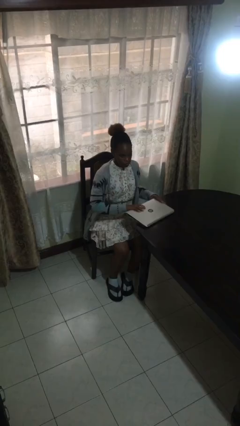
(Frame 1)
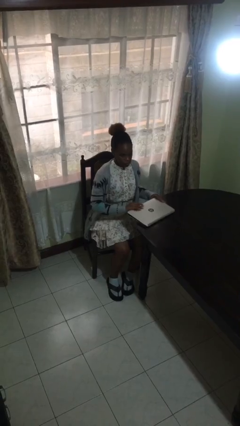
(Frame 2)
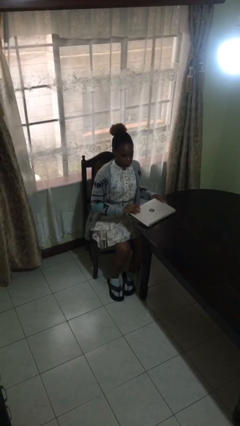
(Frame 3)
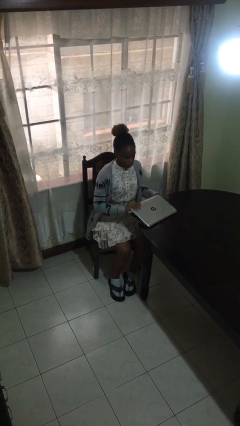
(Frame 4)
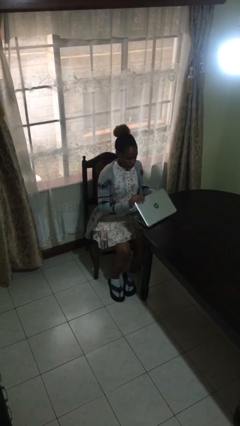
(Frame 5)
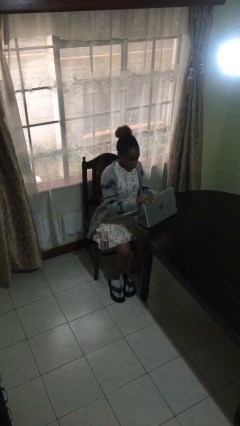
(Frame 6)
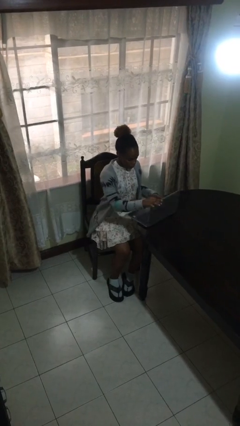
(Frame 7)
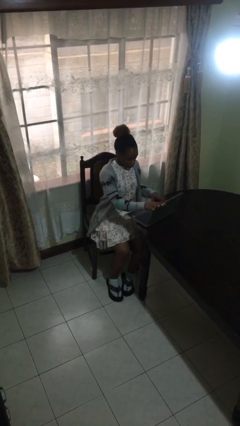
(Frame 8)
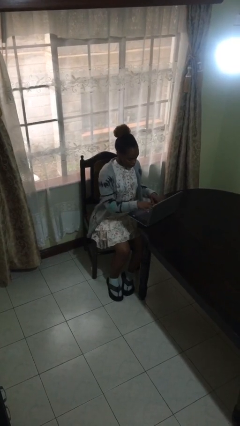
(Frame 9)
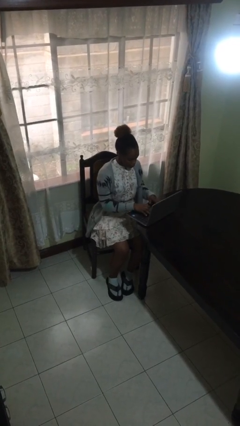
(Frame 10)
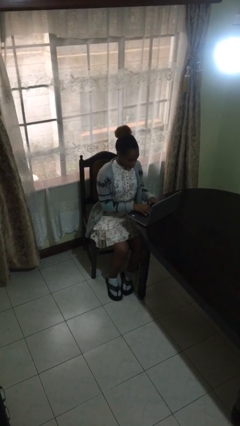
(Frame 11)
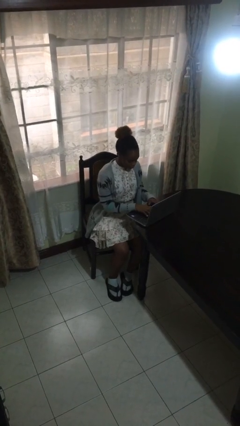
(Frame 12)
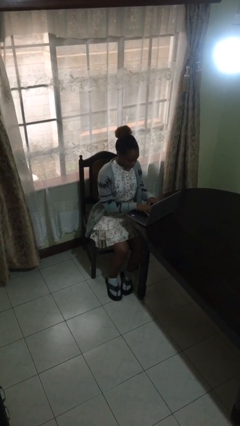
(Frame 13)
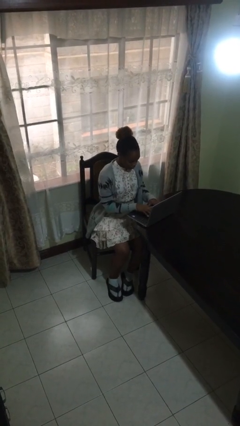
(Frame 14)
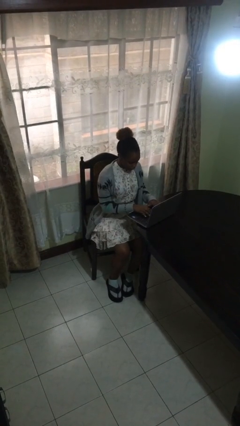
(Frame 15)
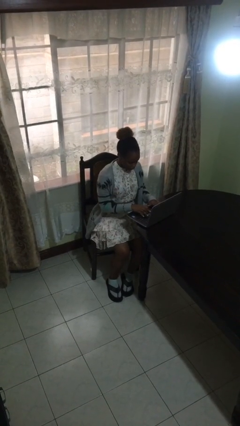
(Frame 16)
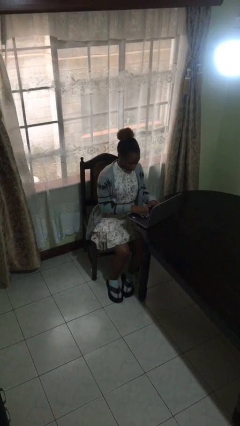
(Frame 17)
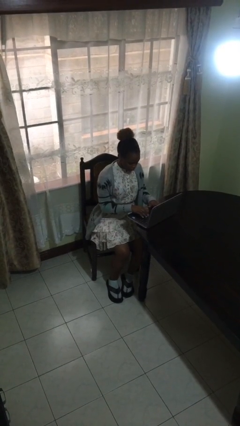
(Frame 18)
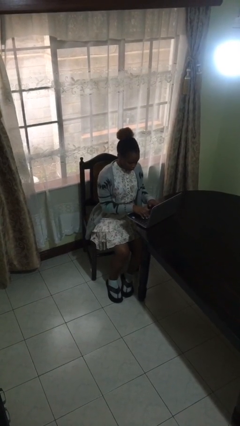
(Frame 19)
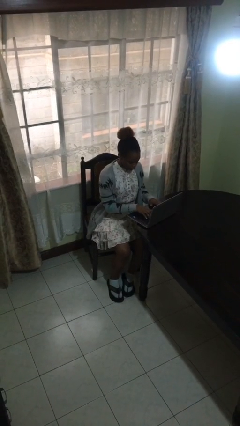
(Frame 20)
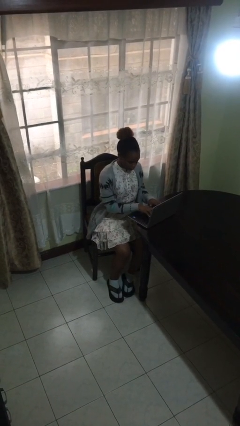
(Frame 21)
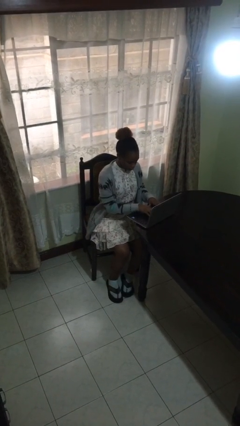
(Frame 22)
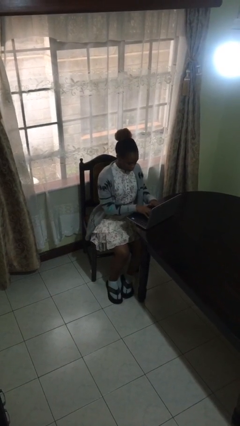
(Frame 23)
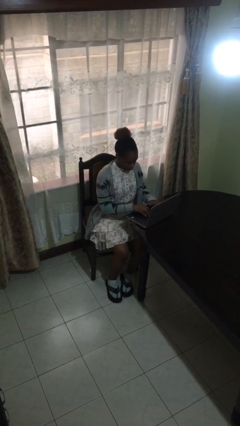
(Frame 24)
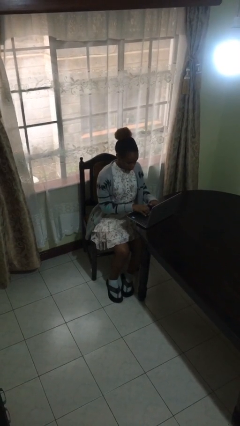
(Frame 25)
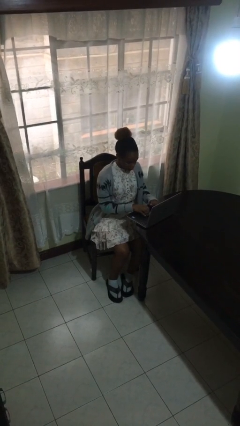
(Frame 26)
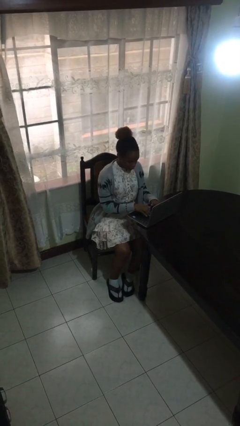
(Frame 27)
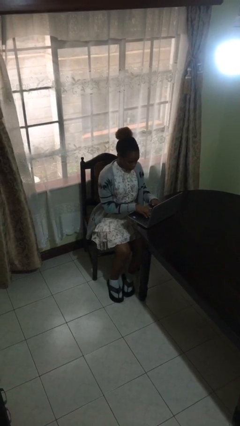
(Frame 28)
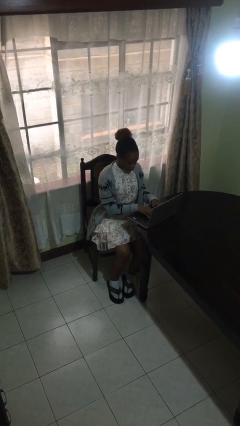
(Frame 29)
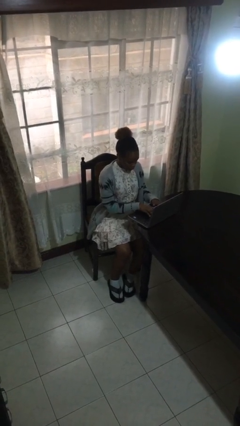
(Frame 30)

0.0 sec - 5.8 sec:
person interacts with laptop

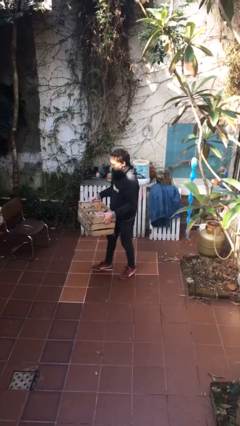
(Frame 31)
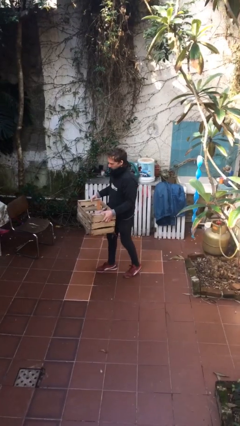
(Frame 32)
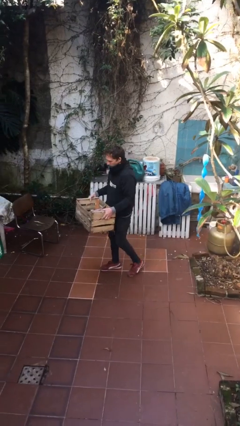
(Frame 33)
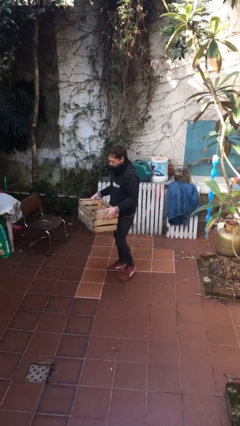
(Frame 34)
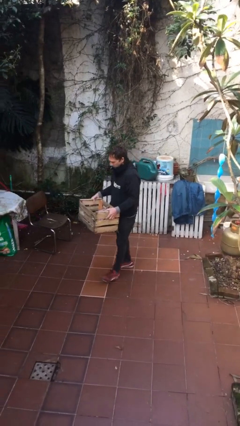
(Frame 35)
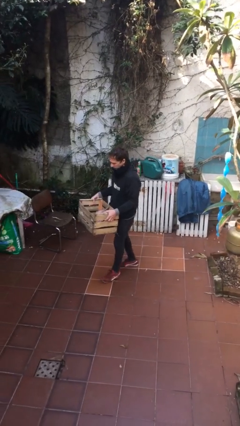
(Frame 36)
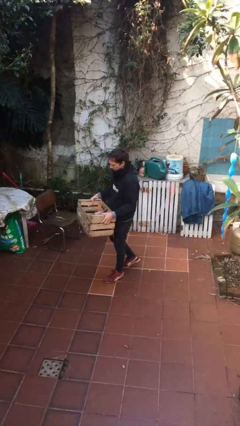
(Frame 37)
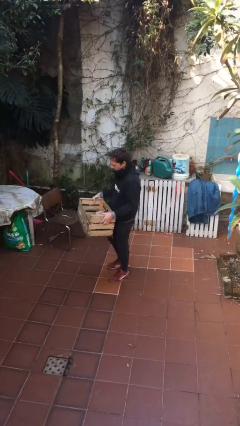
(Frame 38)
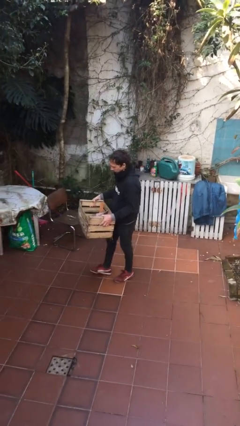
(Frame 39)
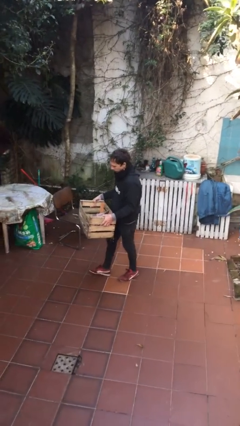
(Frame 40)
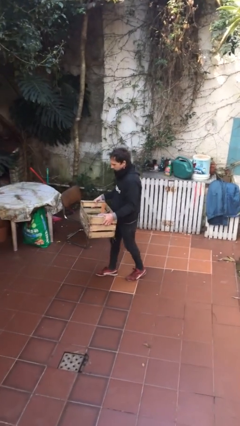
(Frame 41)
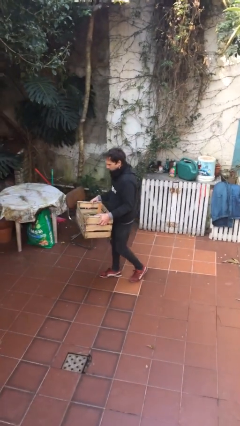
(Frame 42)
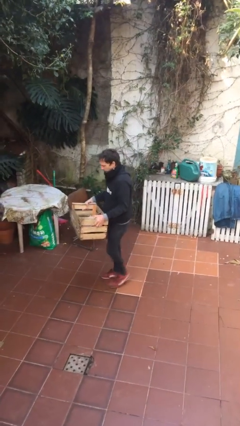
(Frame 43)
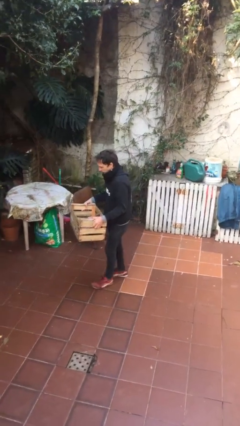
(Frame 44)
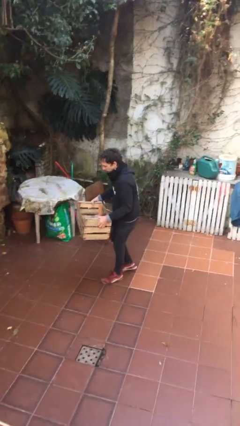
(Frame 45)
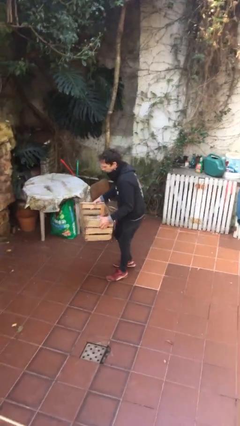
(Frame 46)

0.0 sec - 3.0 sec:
person carries heavy object

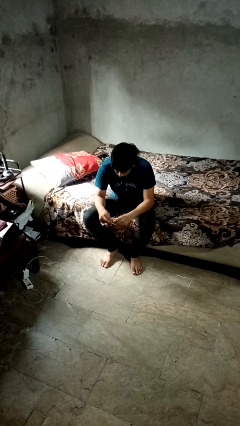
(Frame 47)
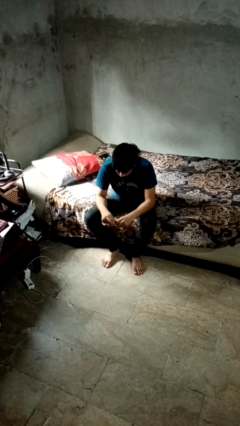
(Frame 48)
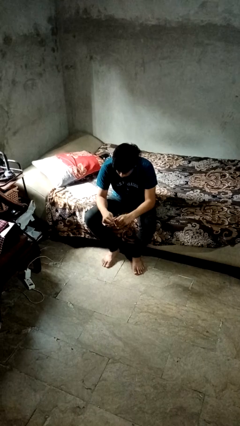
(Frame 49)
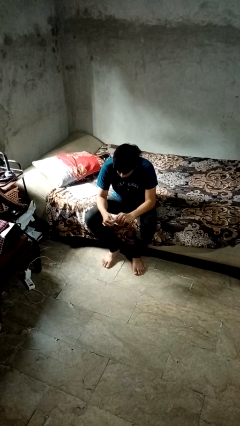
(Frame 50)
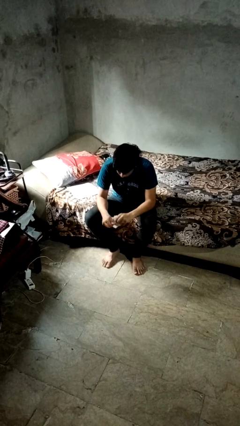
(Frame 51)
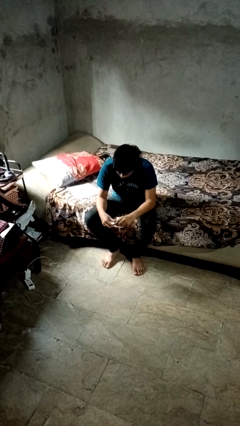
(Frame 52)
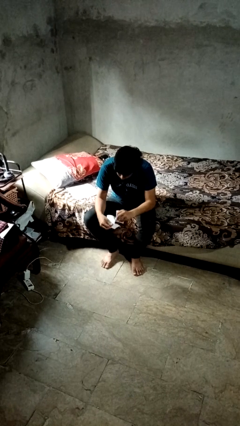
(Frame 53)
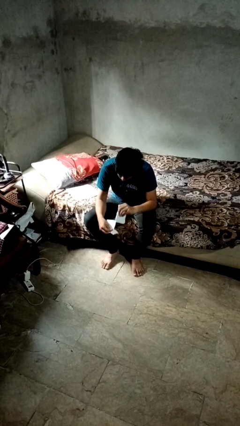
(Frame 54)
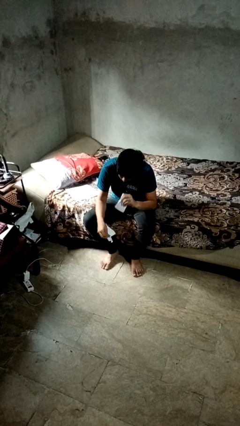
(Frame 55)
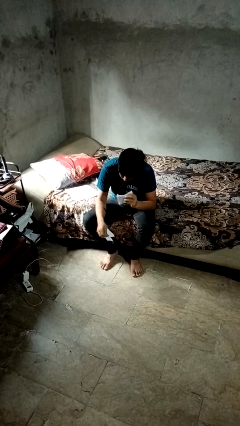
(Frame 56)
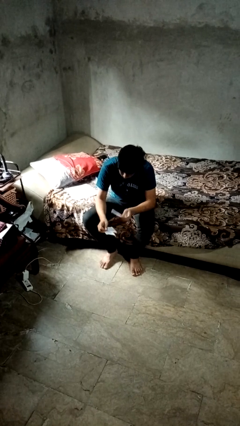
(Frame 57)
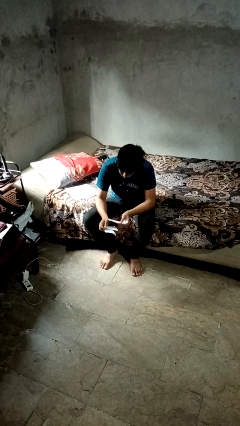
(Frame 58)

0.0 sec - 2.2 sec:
person tears paper

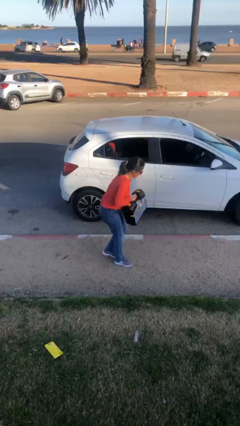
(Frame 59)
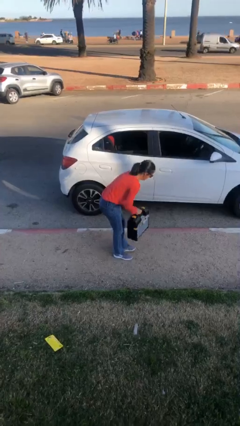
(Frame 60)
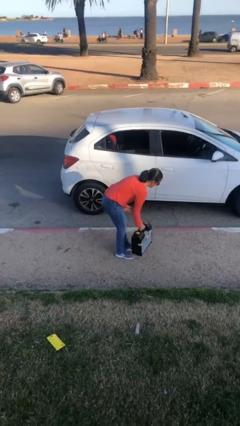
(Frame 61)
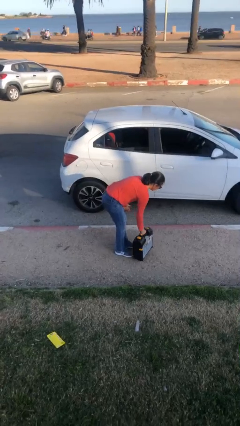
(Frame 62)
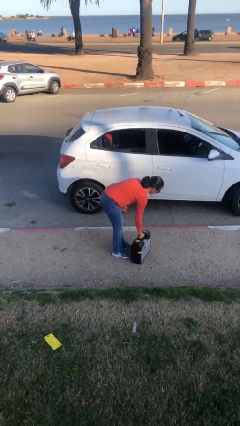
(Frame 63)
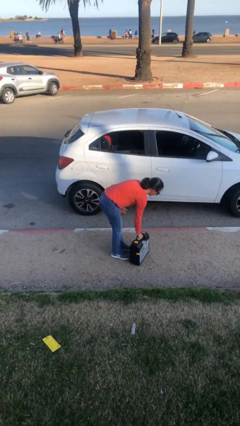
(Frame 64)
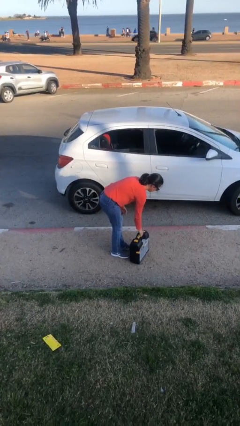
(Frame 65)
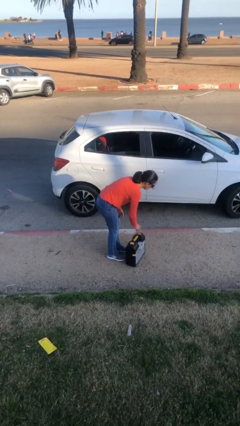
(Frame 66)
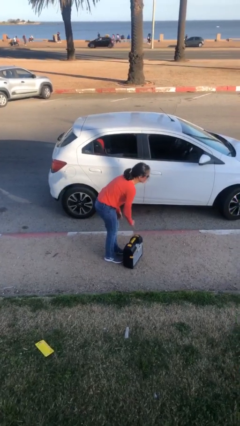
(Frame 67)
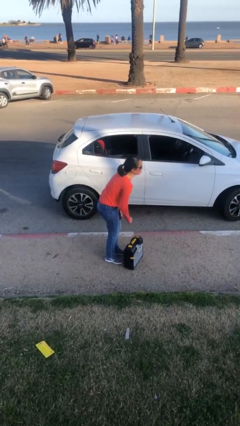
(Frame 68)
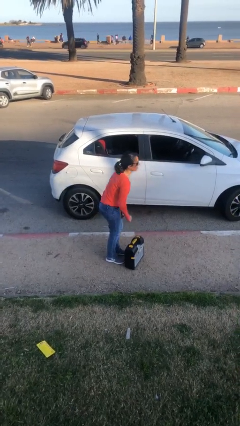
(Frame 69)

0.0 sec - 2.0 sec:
person puts down object on floor

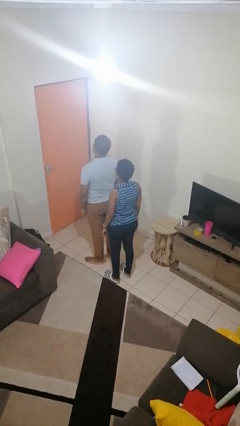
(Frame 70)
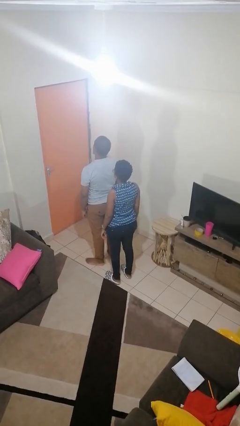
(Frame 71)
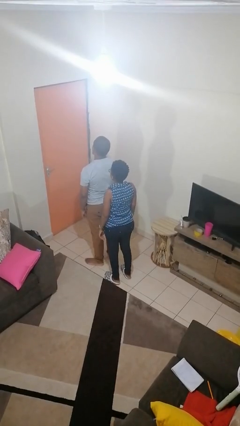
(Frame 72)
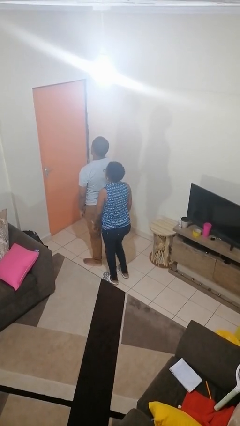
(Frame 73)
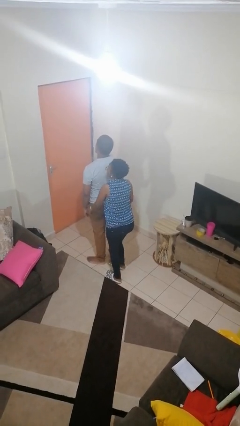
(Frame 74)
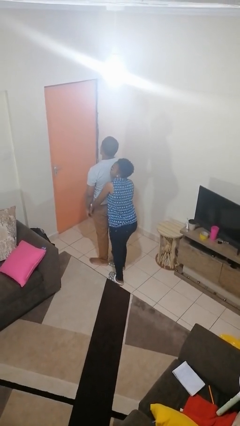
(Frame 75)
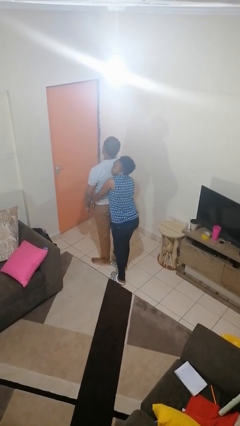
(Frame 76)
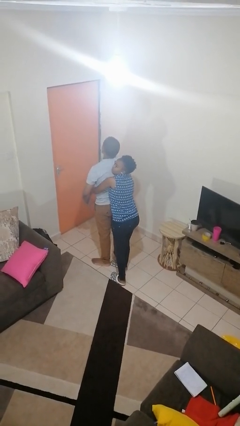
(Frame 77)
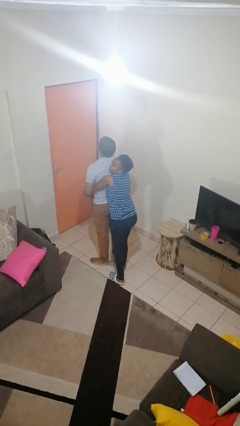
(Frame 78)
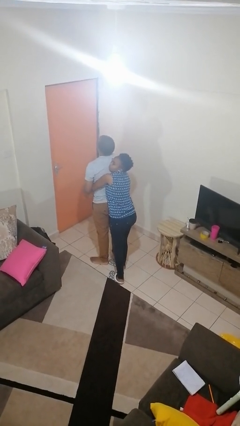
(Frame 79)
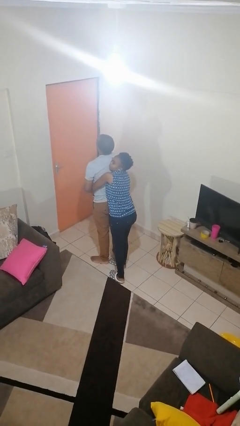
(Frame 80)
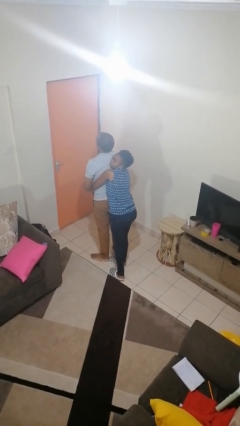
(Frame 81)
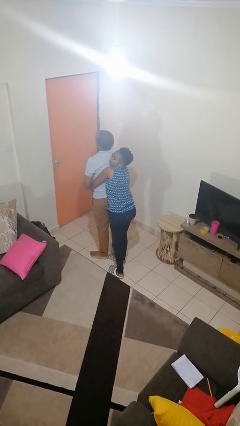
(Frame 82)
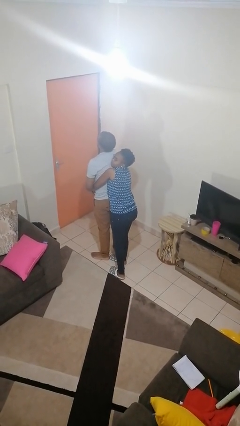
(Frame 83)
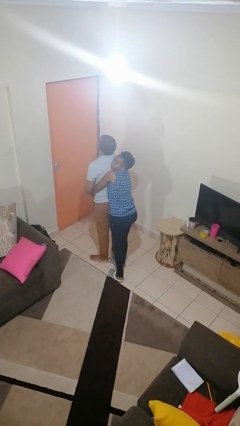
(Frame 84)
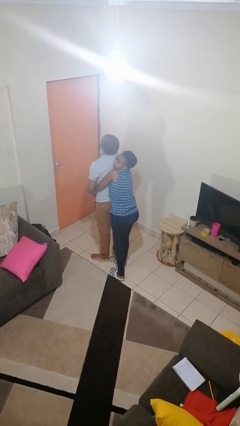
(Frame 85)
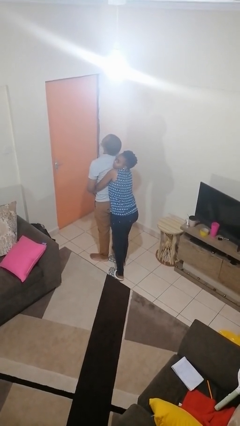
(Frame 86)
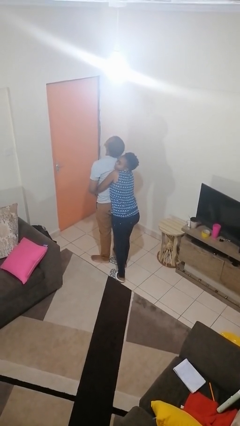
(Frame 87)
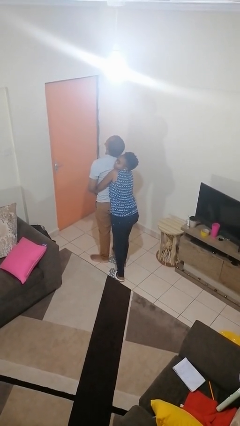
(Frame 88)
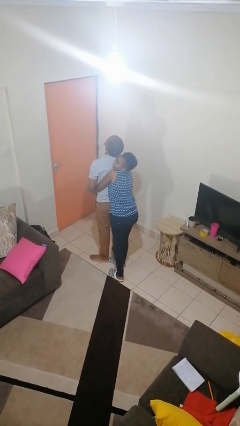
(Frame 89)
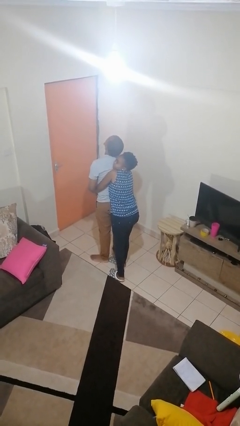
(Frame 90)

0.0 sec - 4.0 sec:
person hugs person from behind

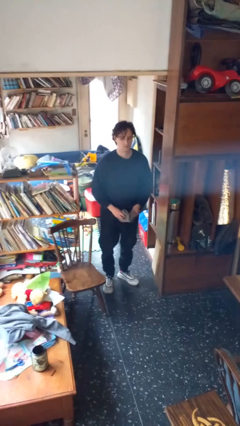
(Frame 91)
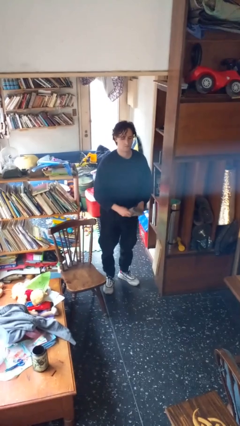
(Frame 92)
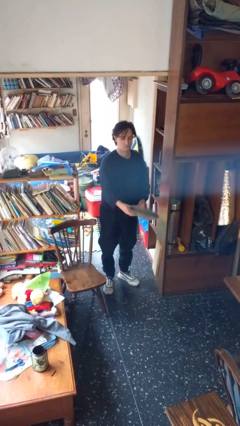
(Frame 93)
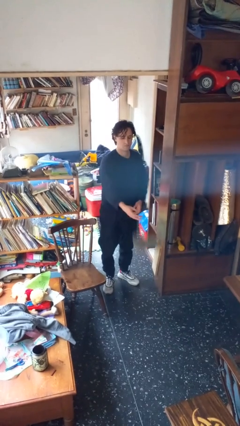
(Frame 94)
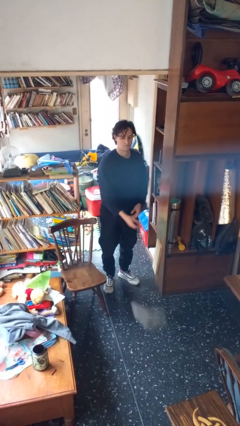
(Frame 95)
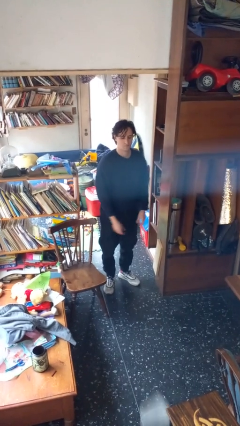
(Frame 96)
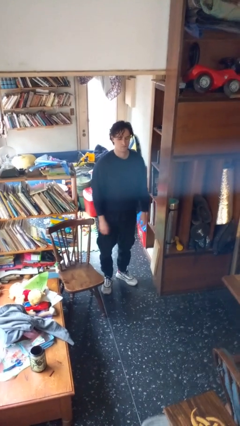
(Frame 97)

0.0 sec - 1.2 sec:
person throws object to ground
